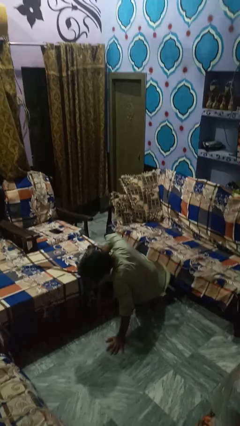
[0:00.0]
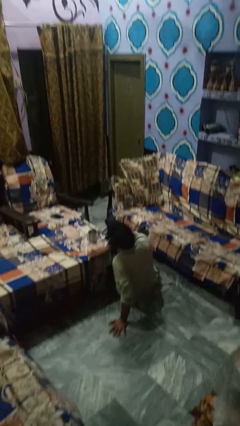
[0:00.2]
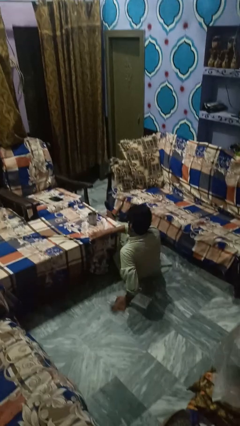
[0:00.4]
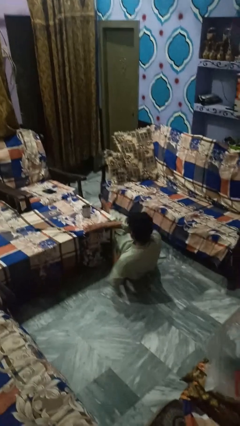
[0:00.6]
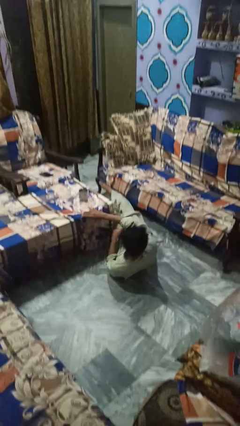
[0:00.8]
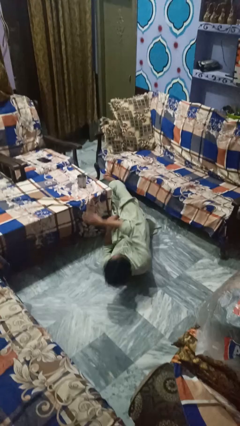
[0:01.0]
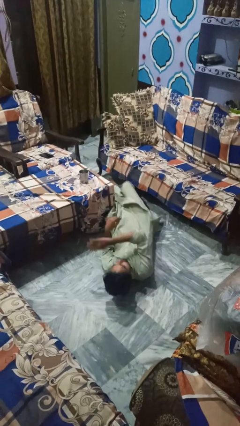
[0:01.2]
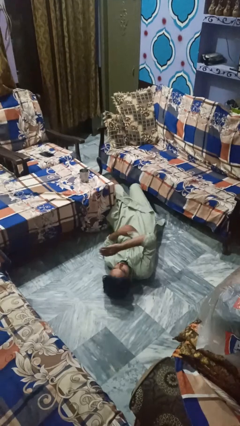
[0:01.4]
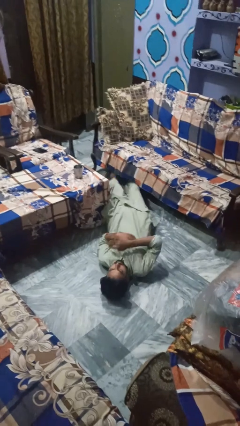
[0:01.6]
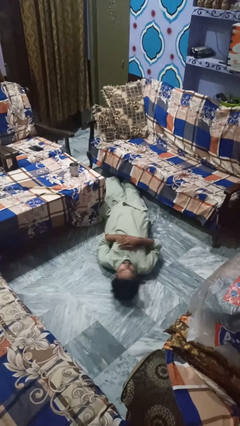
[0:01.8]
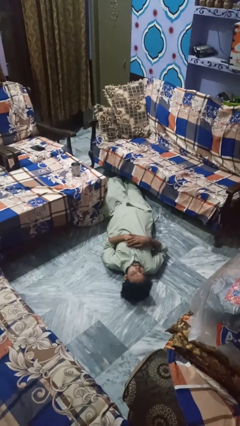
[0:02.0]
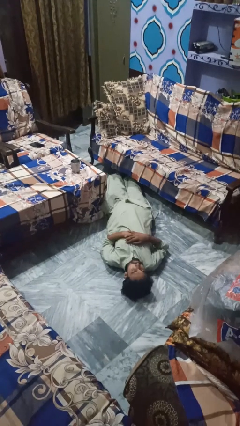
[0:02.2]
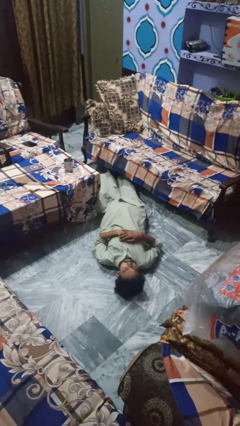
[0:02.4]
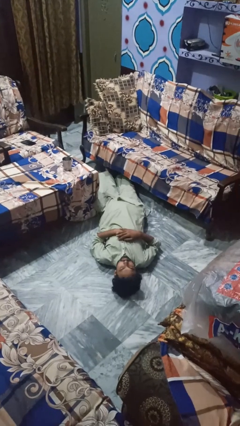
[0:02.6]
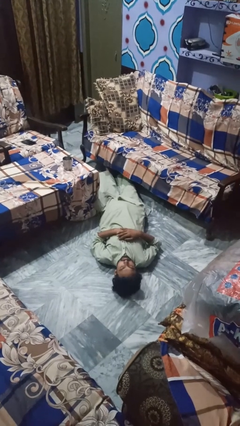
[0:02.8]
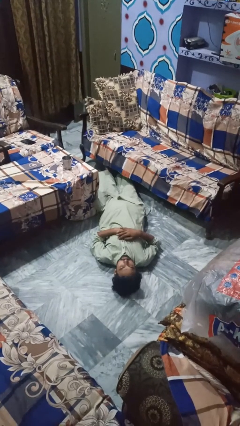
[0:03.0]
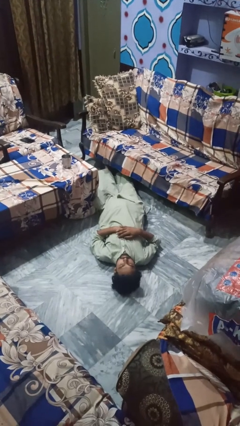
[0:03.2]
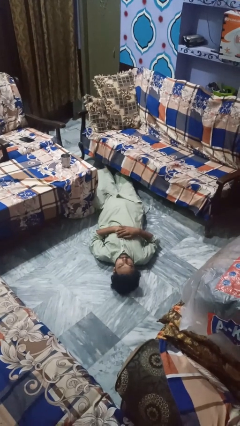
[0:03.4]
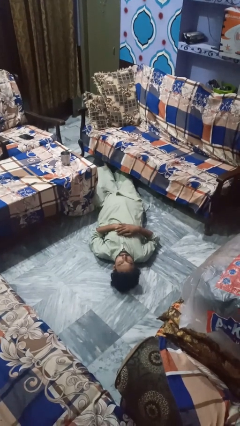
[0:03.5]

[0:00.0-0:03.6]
person lies down on floor

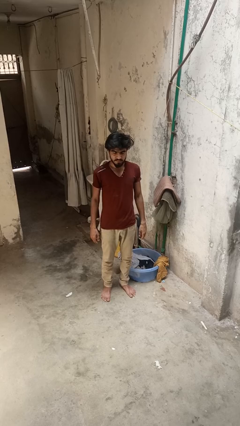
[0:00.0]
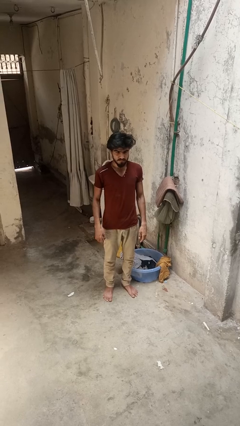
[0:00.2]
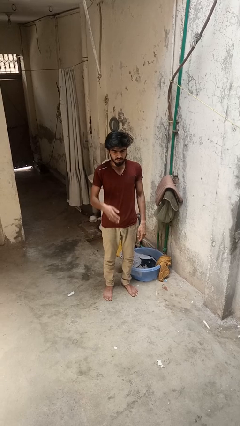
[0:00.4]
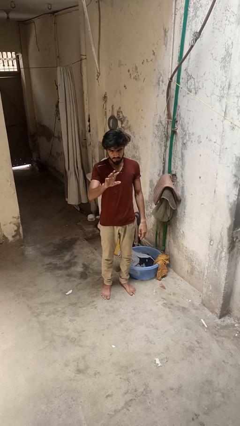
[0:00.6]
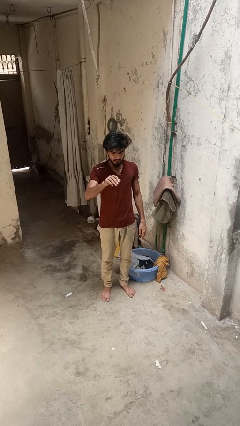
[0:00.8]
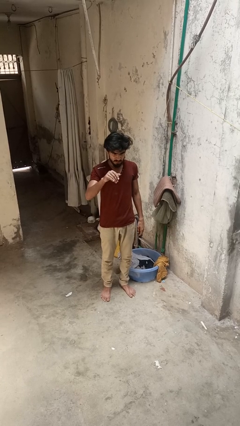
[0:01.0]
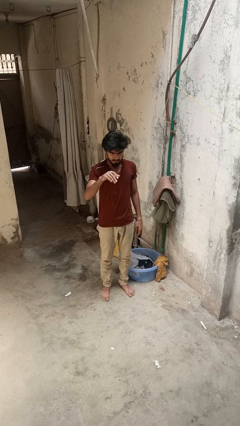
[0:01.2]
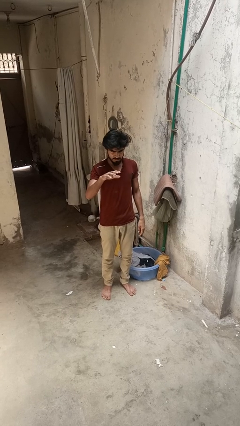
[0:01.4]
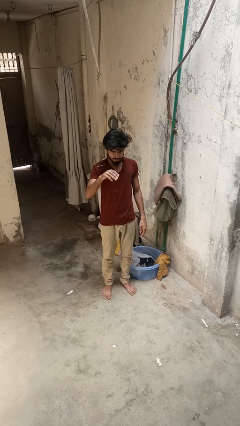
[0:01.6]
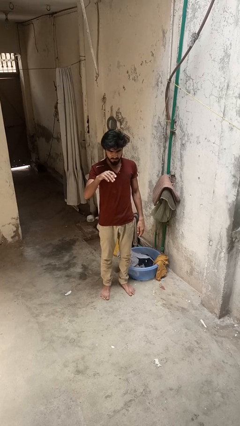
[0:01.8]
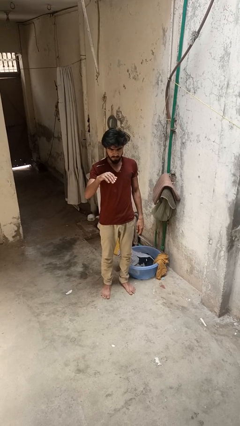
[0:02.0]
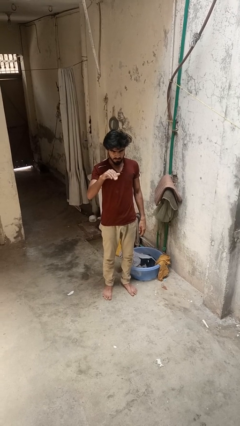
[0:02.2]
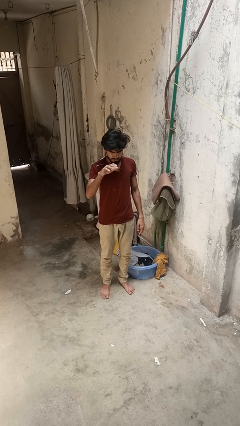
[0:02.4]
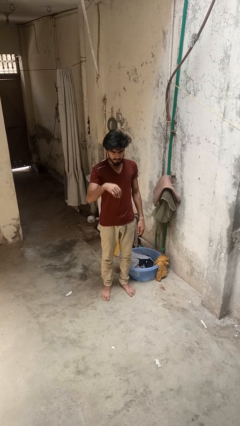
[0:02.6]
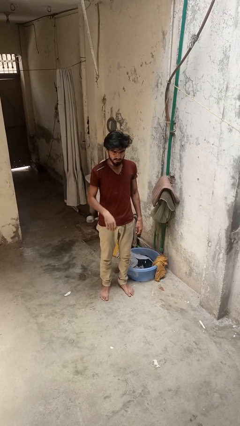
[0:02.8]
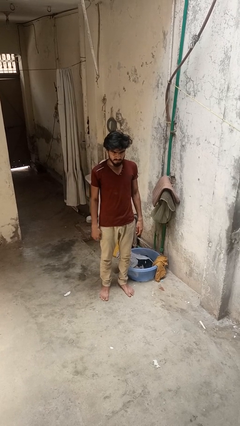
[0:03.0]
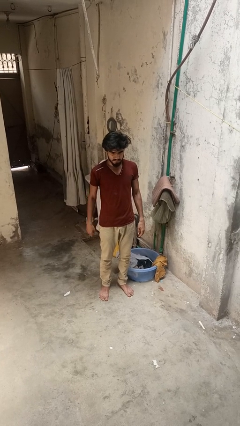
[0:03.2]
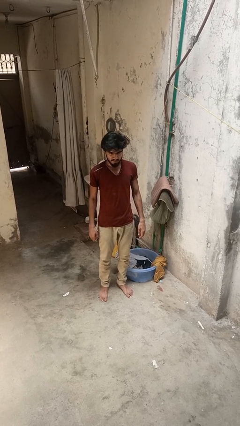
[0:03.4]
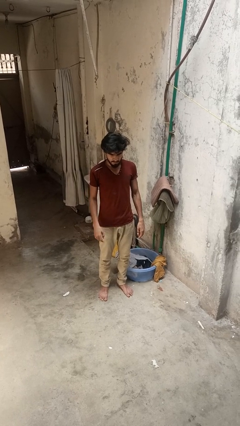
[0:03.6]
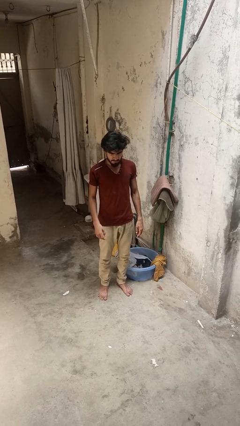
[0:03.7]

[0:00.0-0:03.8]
person gestures come here

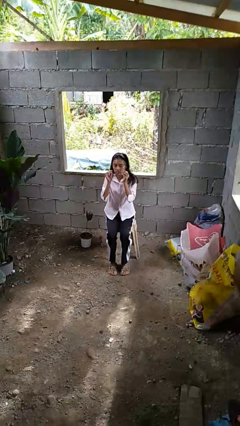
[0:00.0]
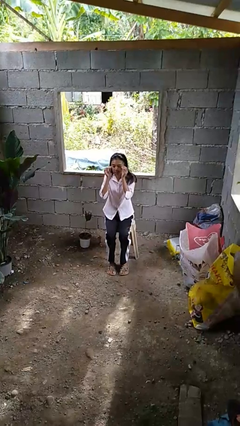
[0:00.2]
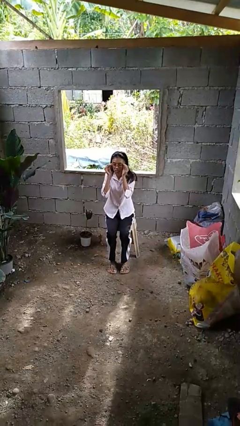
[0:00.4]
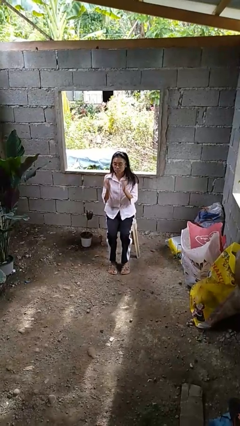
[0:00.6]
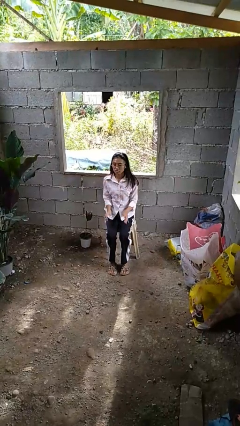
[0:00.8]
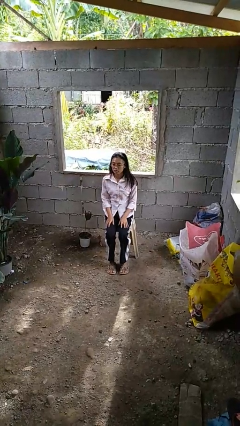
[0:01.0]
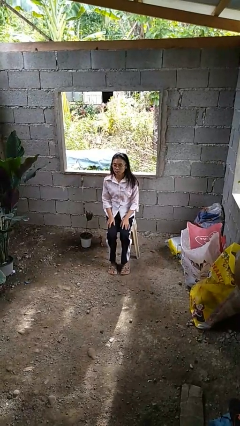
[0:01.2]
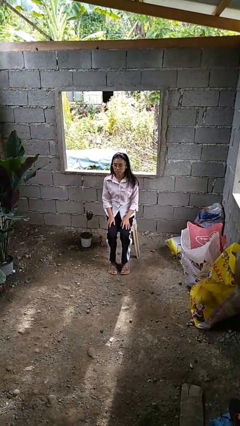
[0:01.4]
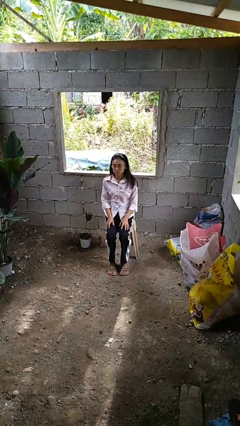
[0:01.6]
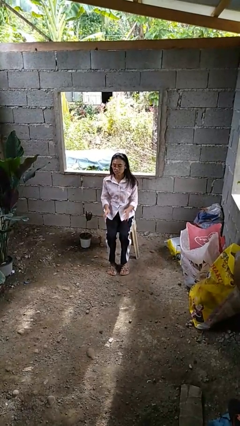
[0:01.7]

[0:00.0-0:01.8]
person puts on glasses

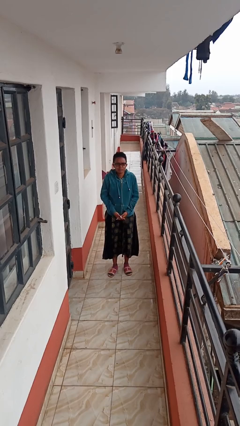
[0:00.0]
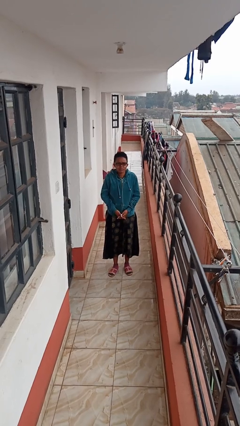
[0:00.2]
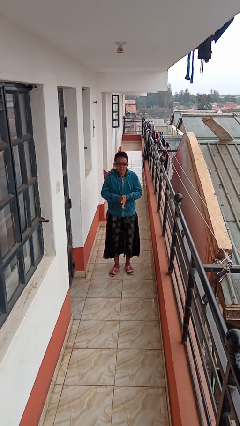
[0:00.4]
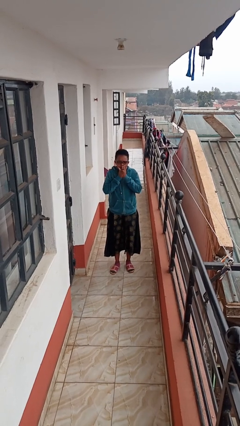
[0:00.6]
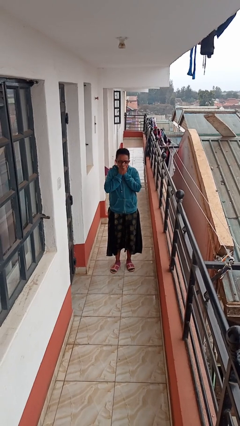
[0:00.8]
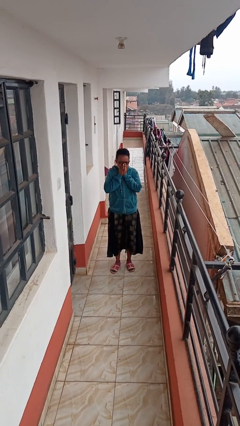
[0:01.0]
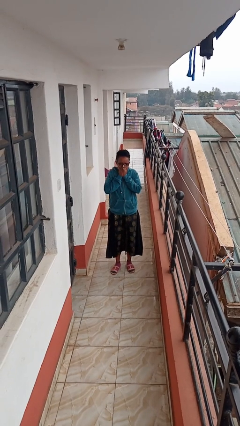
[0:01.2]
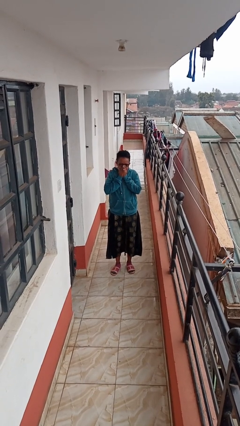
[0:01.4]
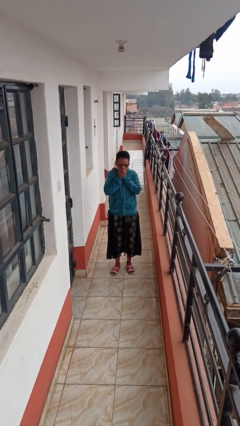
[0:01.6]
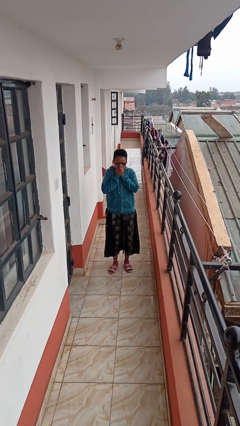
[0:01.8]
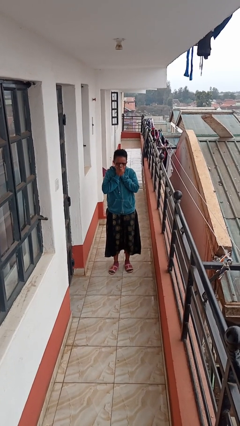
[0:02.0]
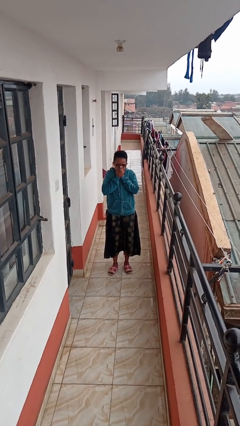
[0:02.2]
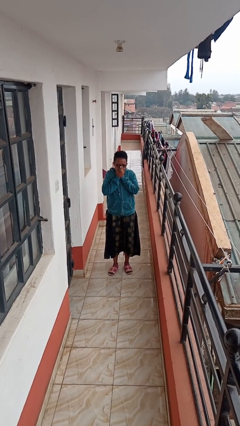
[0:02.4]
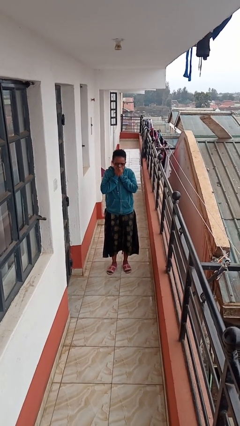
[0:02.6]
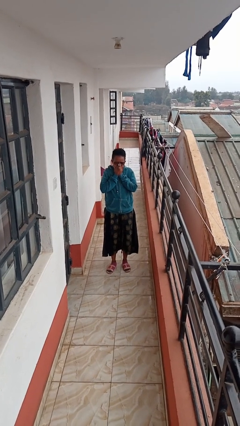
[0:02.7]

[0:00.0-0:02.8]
person blows into hands

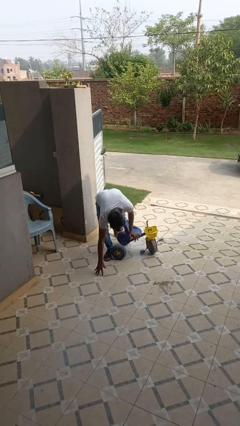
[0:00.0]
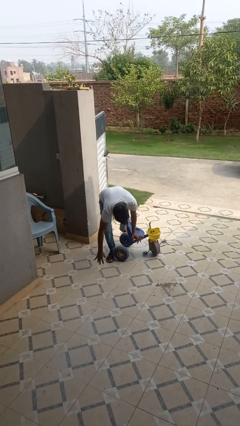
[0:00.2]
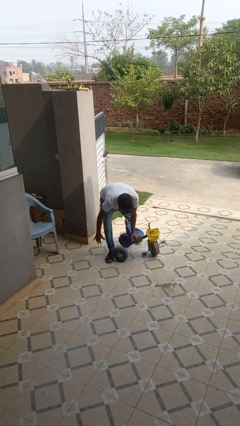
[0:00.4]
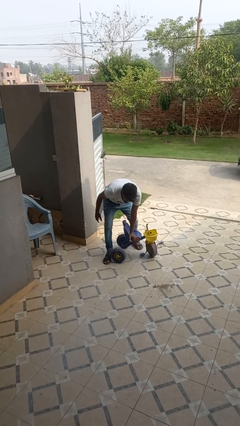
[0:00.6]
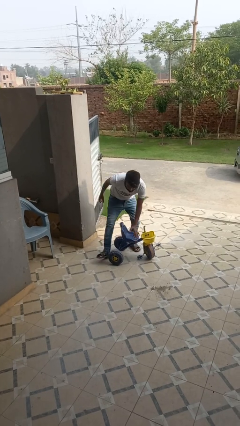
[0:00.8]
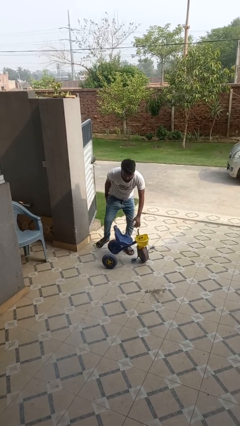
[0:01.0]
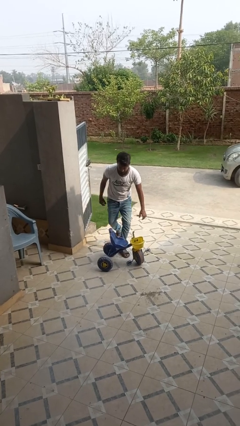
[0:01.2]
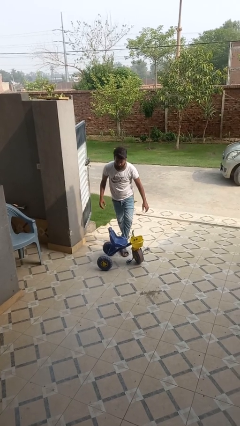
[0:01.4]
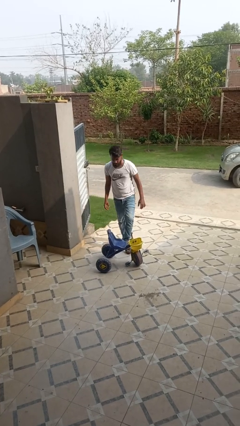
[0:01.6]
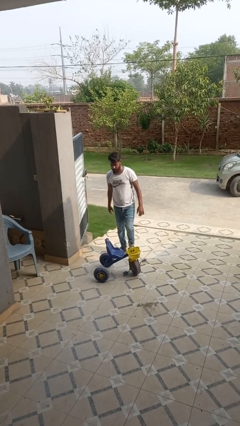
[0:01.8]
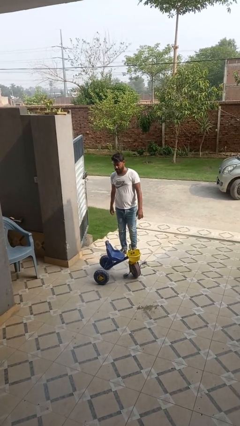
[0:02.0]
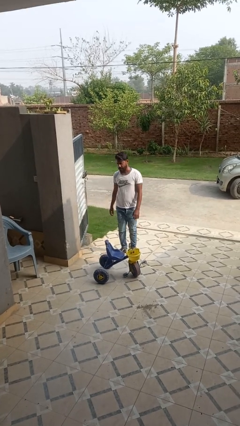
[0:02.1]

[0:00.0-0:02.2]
person stands up from floor

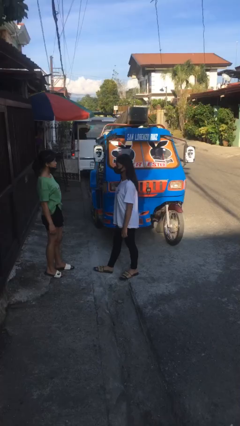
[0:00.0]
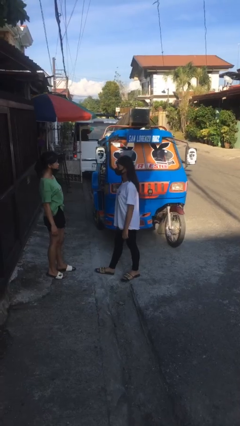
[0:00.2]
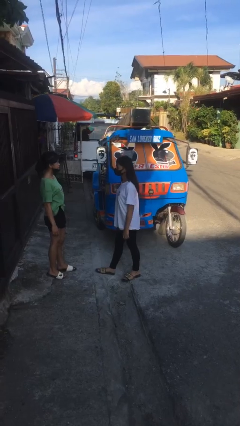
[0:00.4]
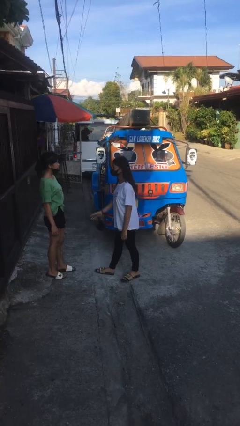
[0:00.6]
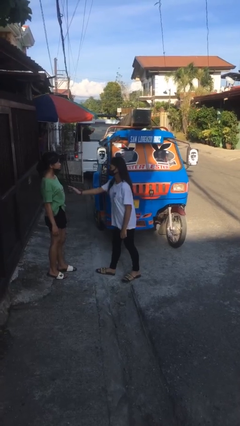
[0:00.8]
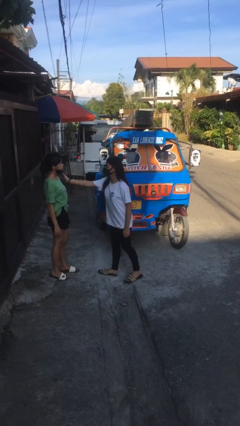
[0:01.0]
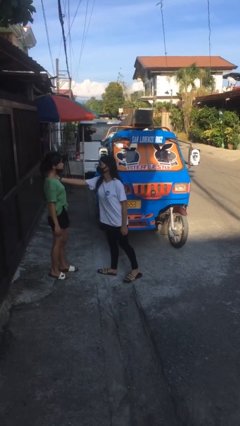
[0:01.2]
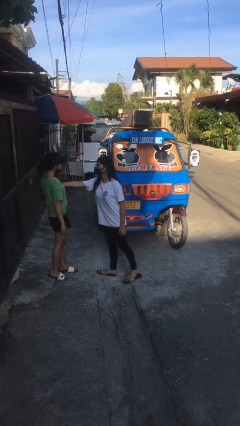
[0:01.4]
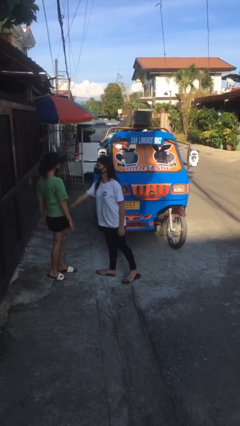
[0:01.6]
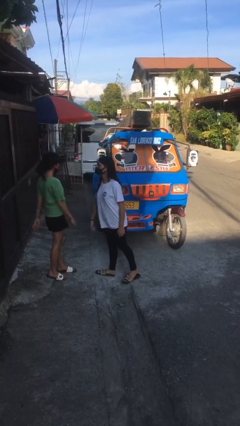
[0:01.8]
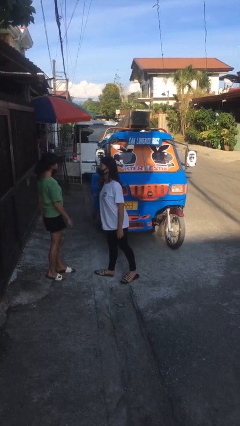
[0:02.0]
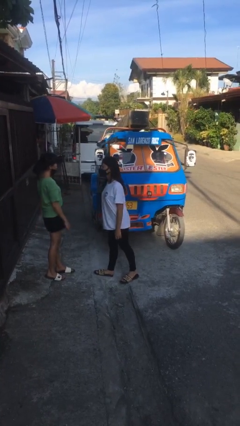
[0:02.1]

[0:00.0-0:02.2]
person shoves person

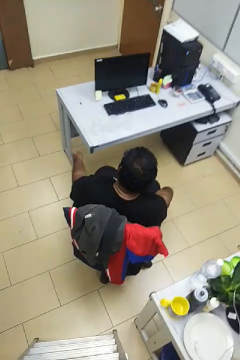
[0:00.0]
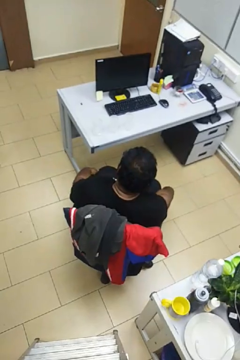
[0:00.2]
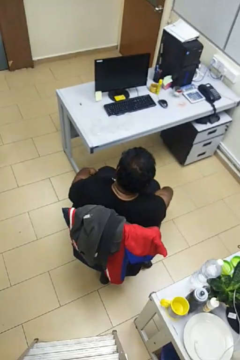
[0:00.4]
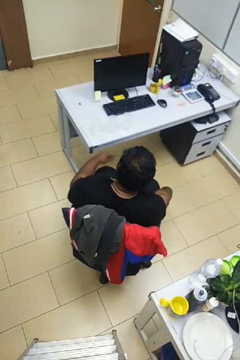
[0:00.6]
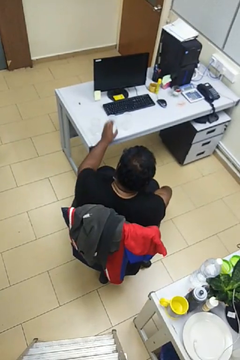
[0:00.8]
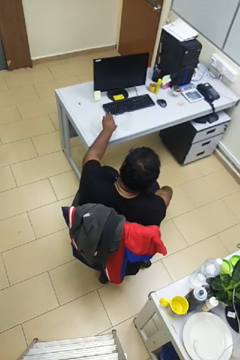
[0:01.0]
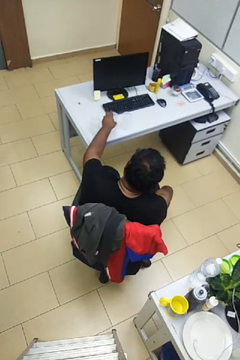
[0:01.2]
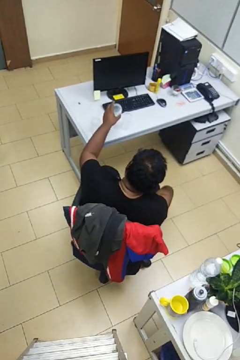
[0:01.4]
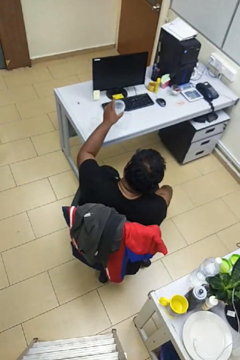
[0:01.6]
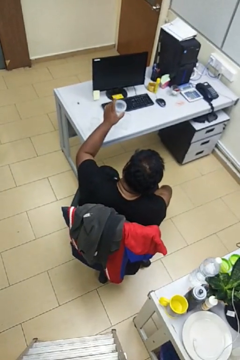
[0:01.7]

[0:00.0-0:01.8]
person picks up object from table
